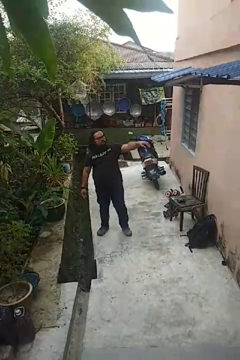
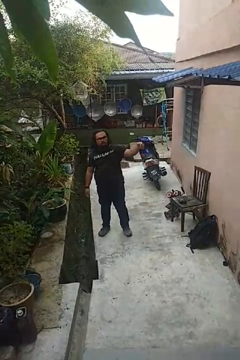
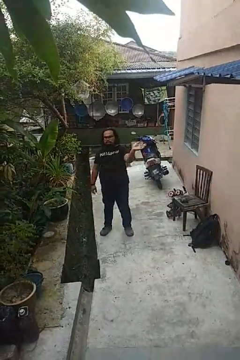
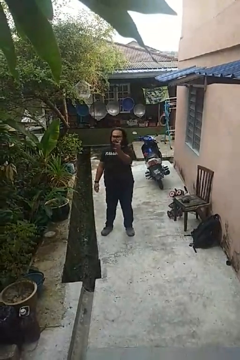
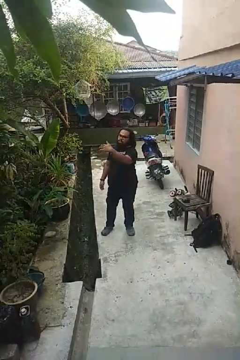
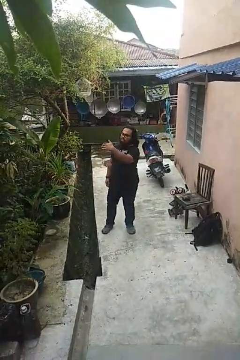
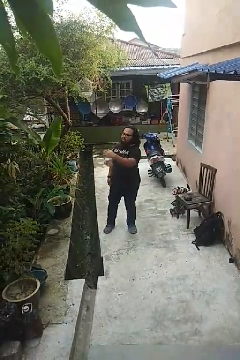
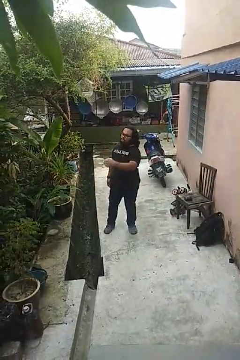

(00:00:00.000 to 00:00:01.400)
person gestures swipe right

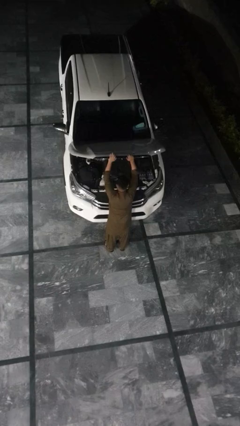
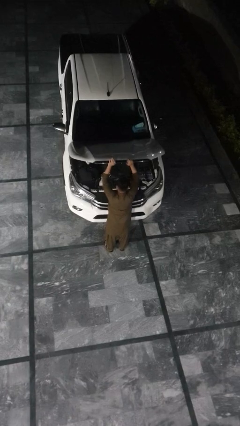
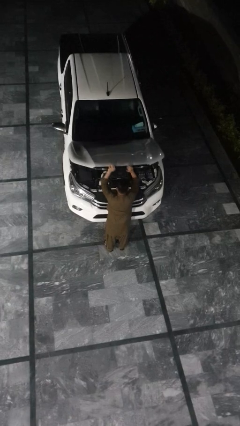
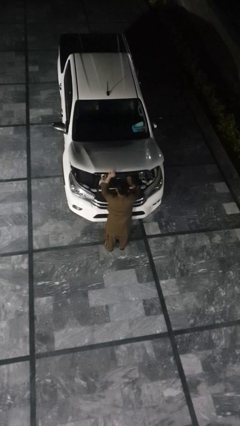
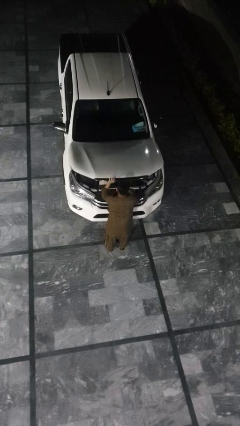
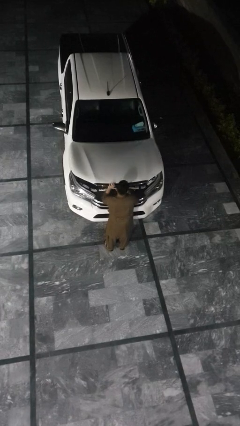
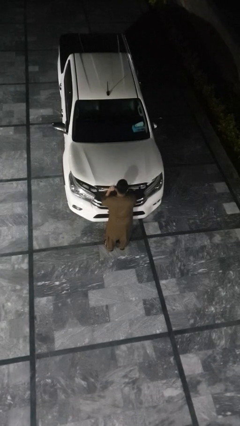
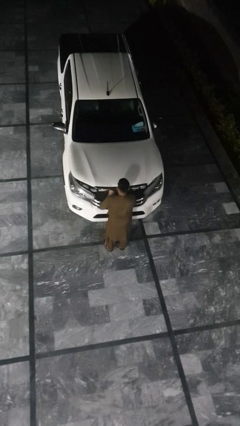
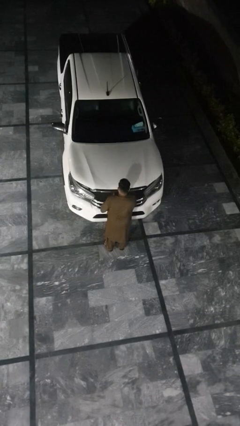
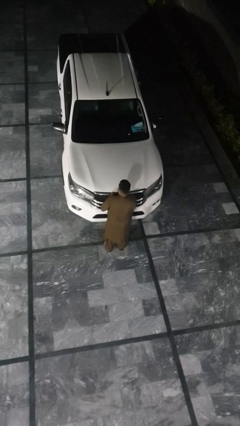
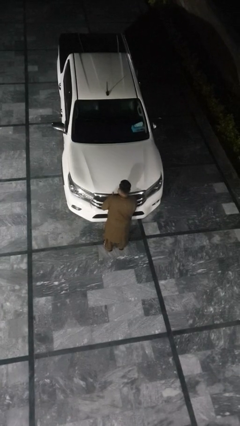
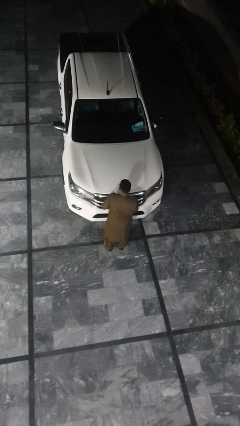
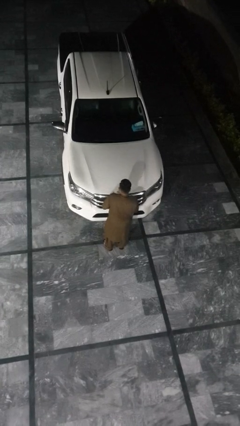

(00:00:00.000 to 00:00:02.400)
person closes car hood

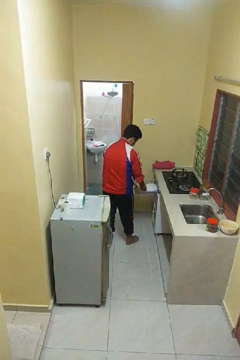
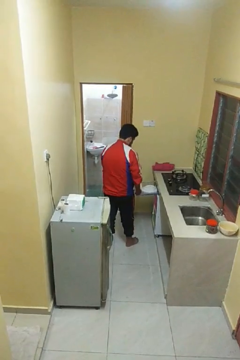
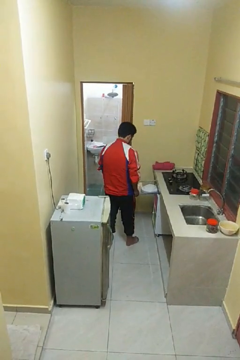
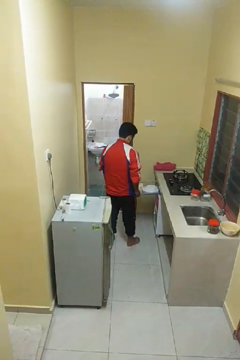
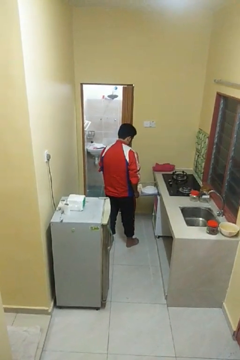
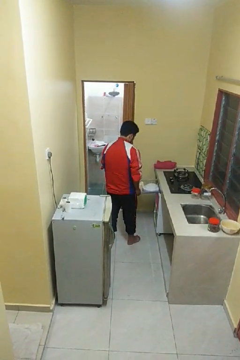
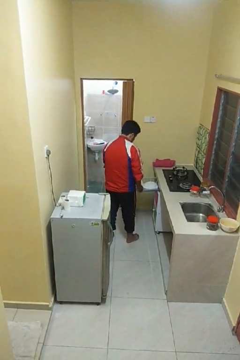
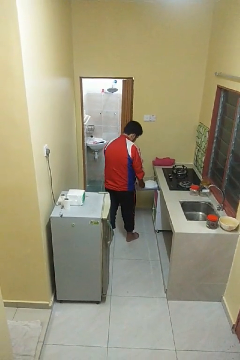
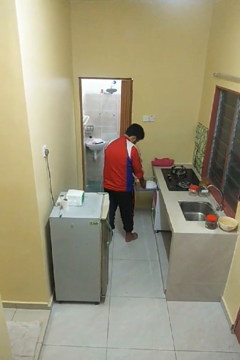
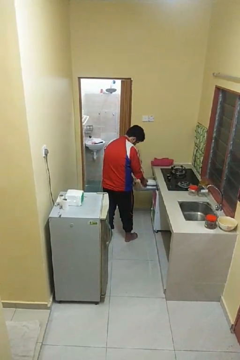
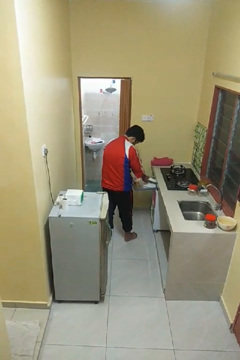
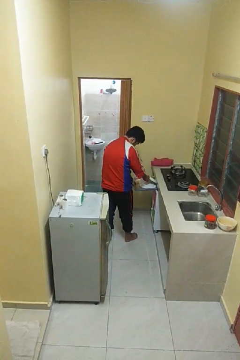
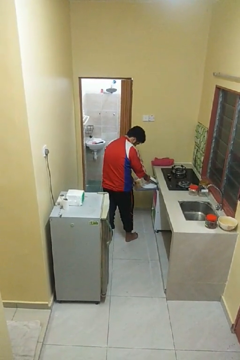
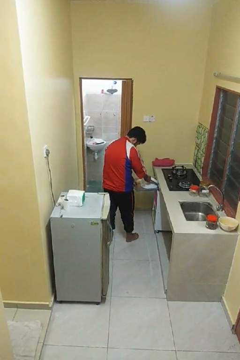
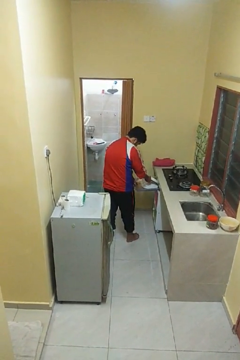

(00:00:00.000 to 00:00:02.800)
person searches in kitchen drawer

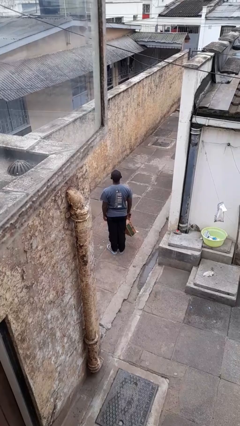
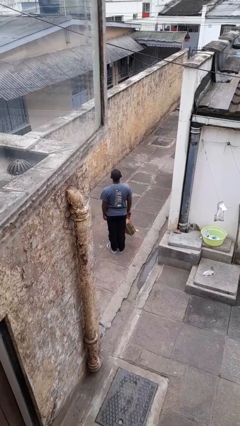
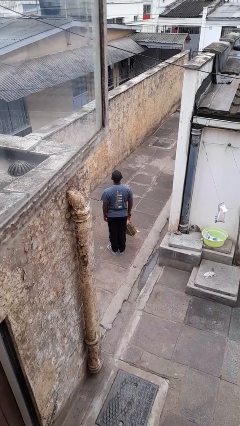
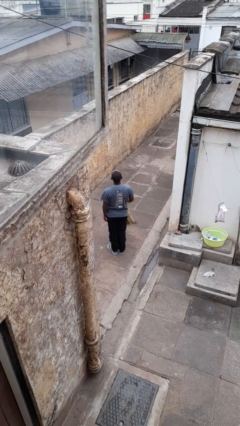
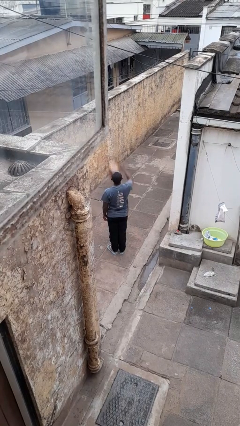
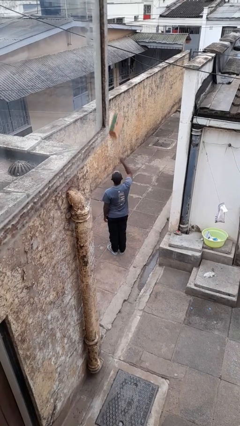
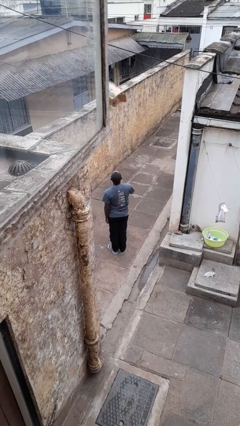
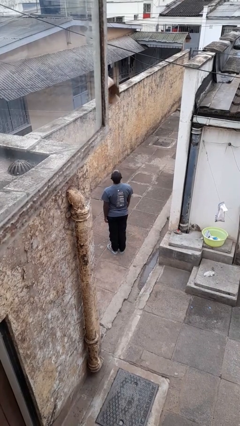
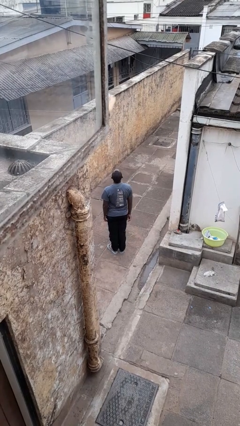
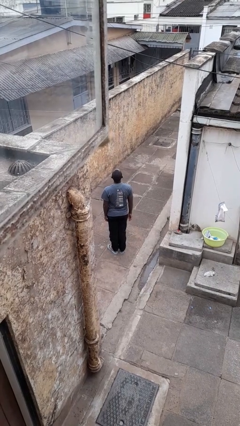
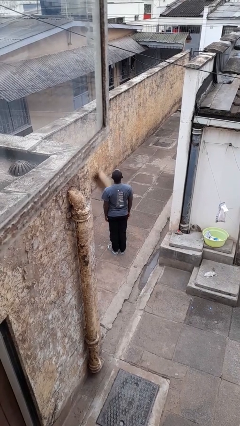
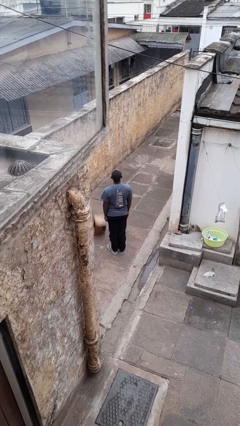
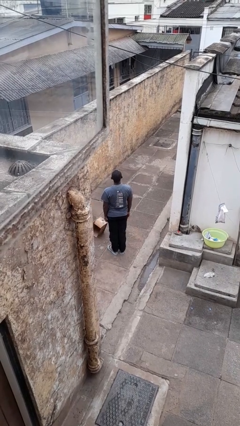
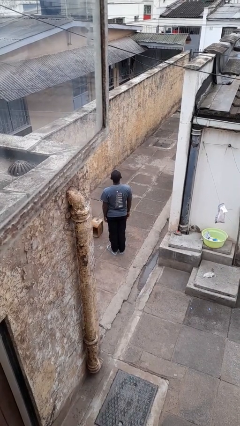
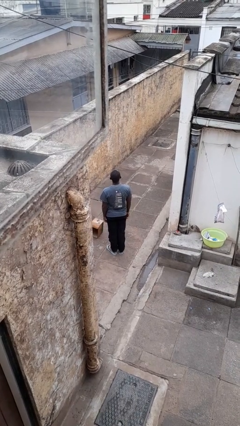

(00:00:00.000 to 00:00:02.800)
person throws object into air

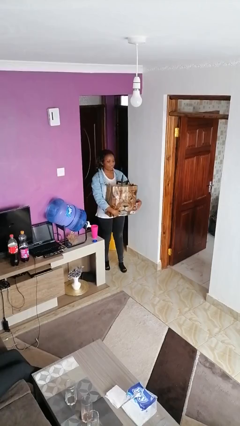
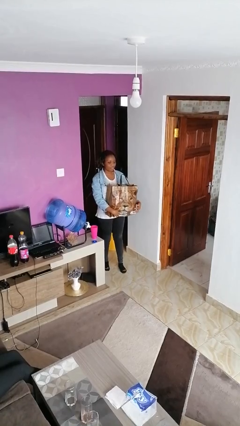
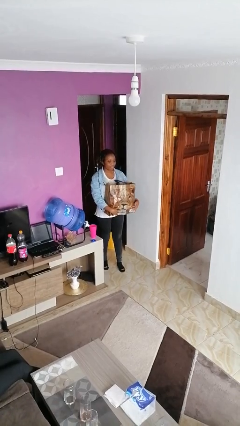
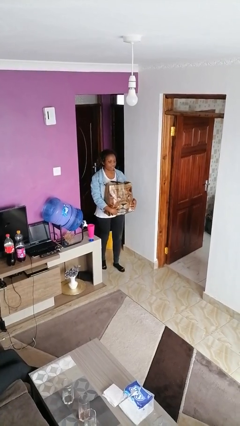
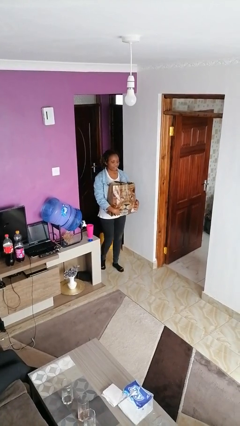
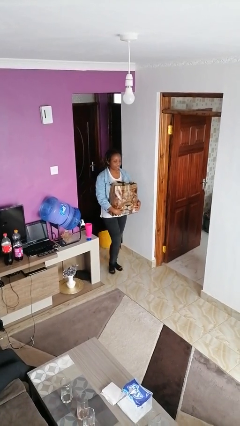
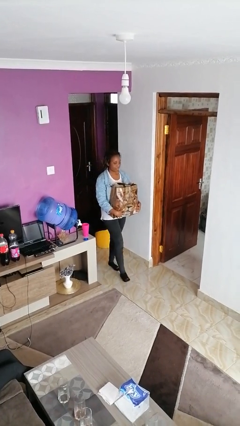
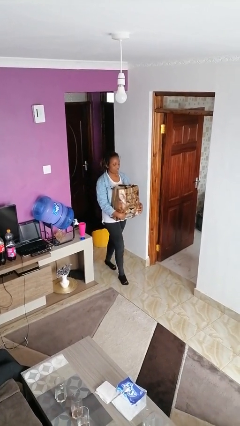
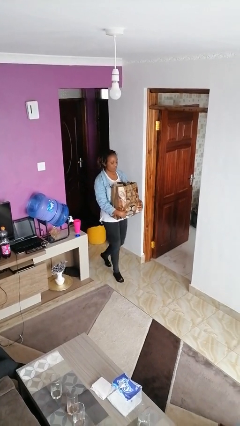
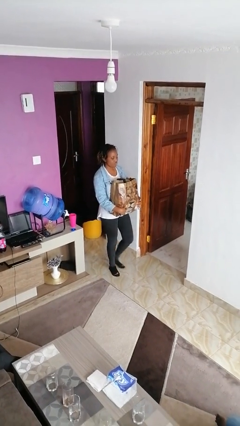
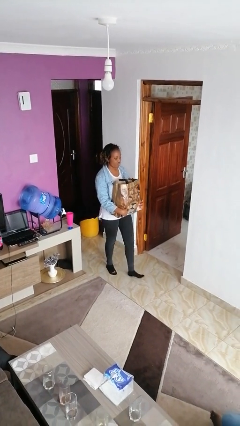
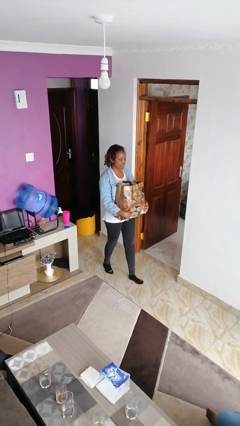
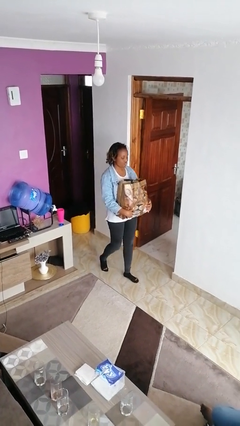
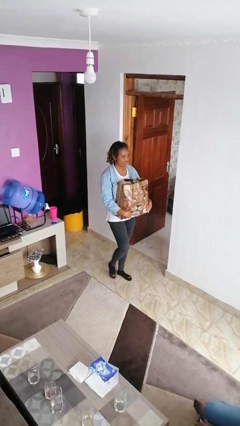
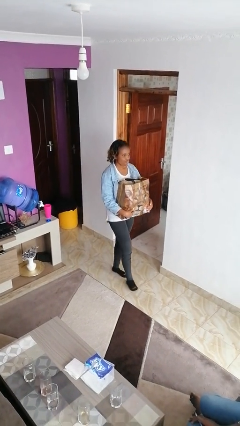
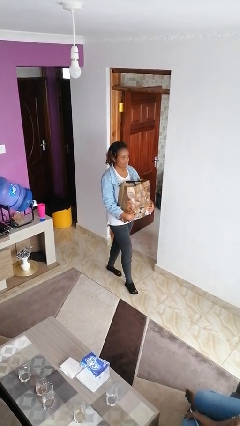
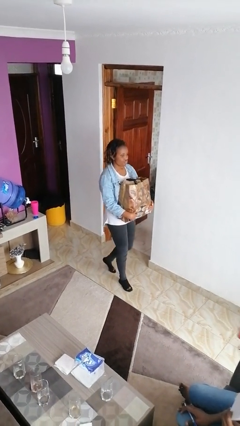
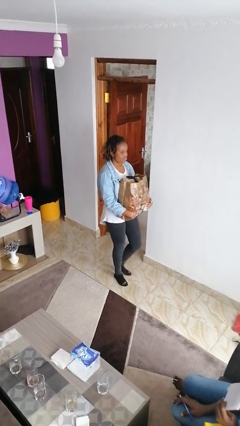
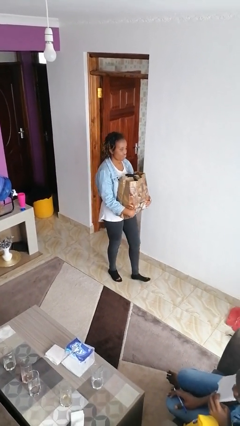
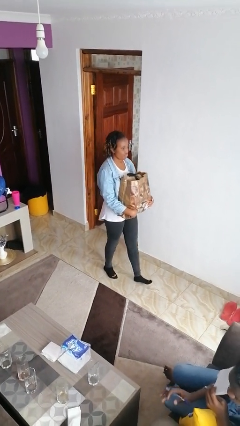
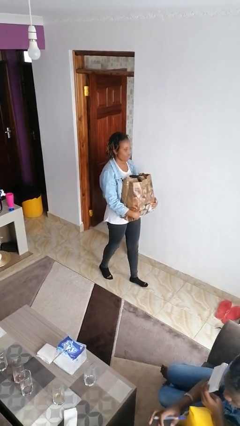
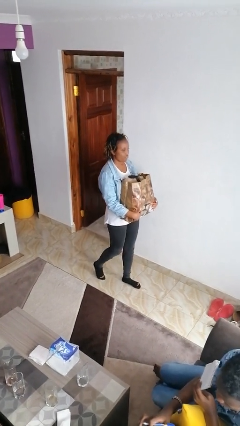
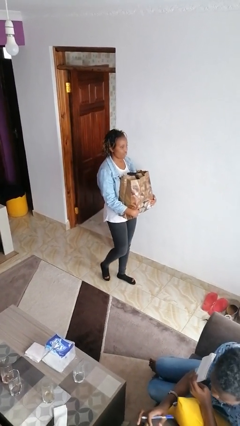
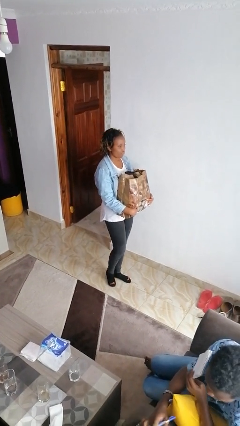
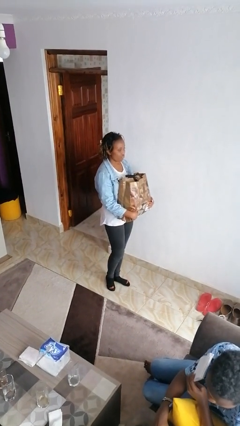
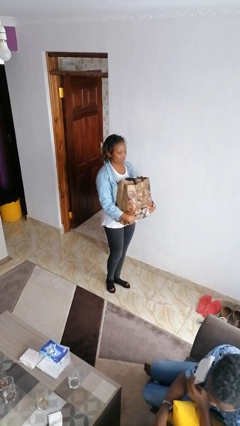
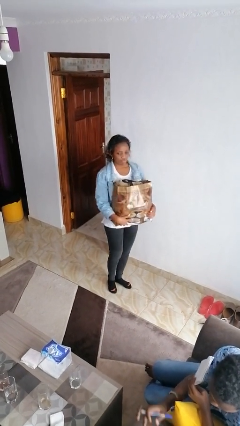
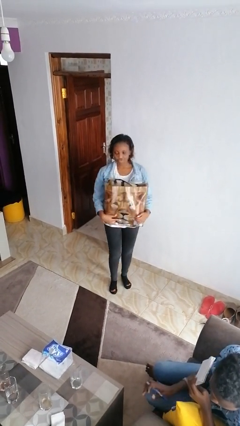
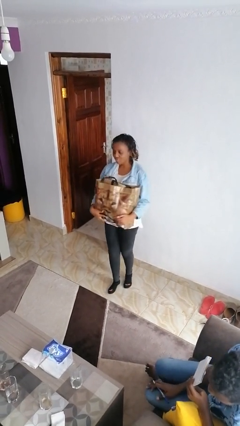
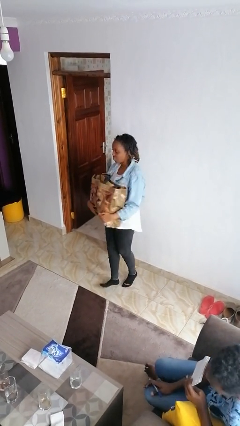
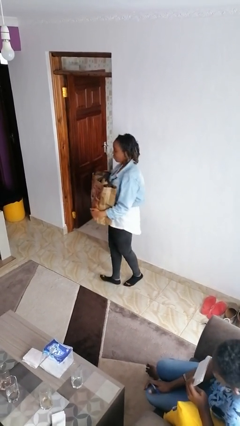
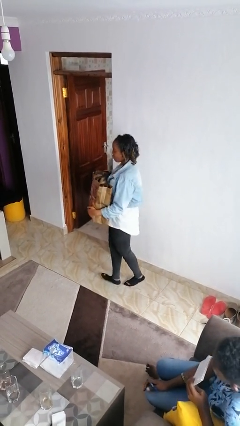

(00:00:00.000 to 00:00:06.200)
person carries groceries

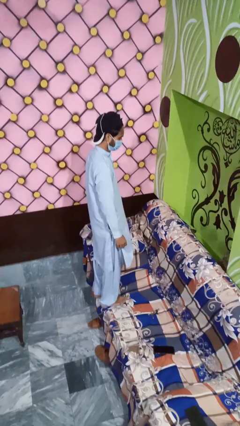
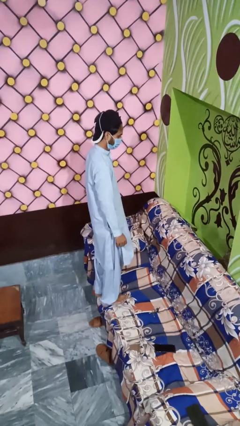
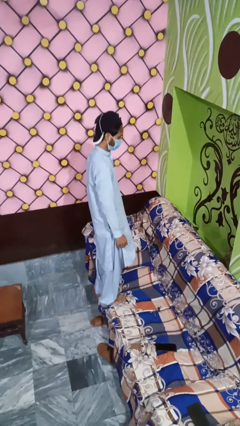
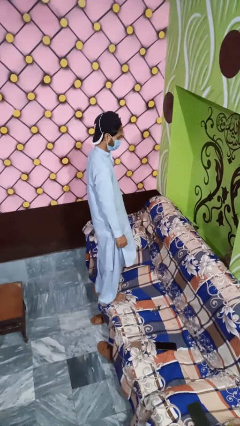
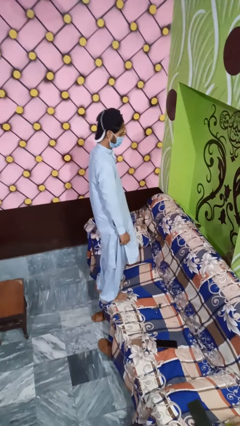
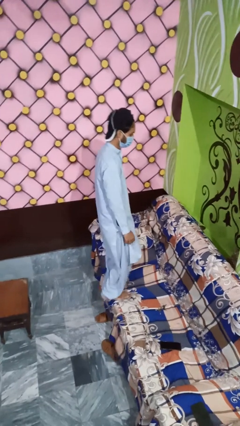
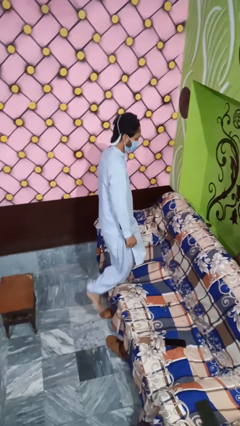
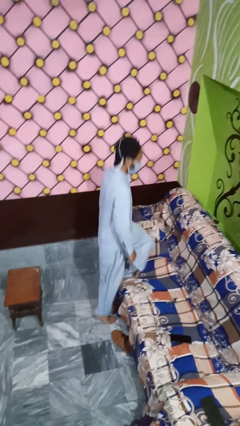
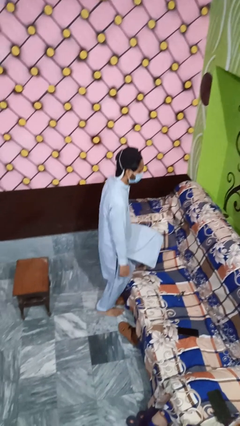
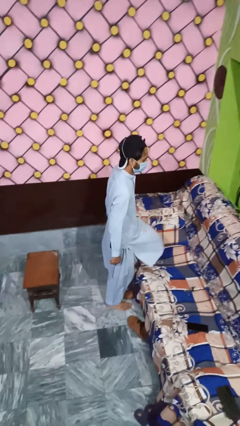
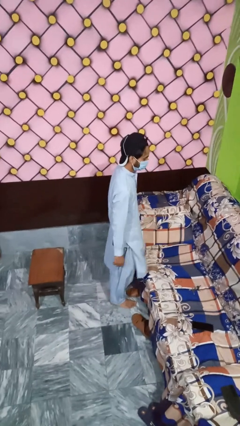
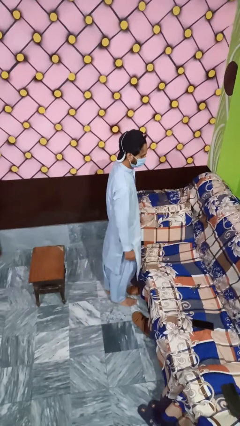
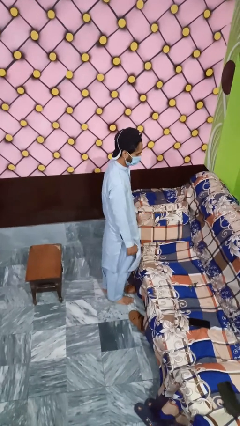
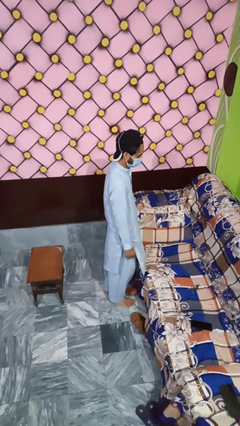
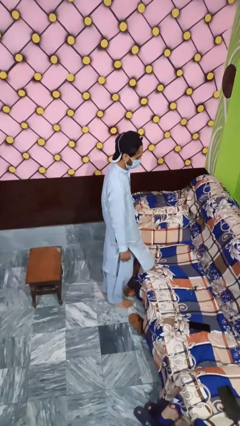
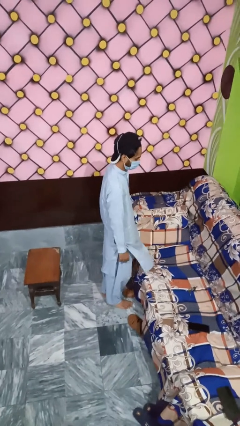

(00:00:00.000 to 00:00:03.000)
person climbs off couch
